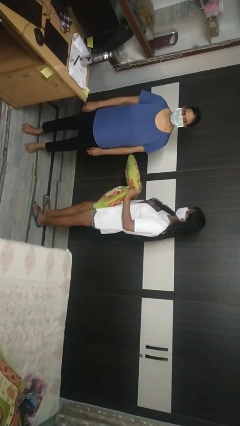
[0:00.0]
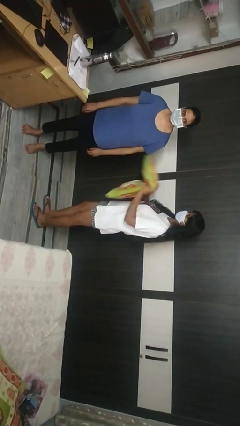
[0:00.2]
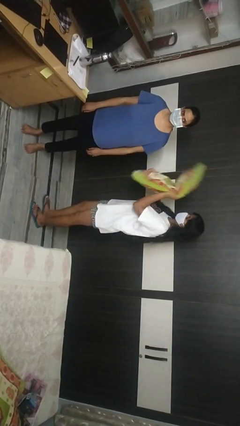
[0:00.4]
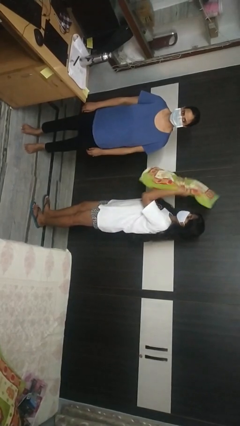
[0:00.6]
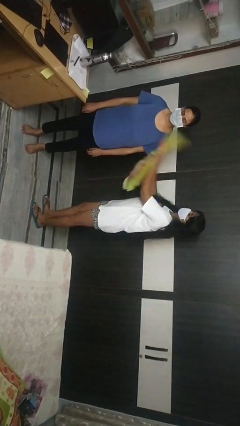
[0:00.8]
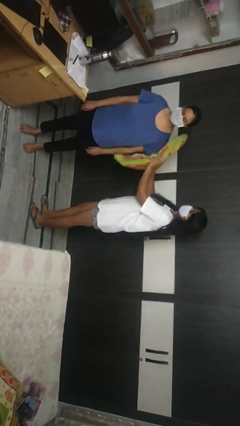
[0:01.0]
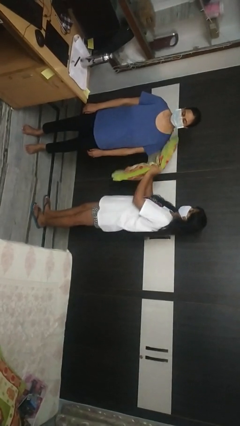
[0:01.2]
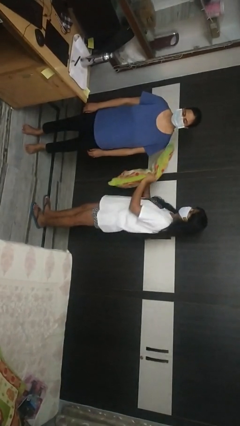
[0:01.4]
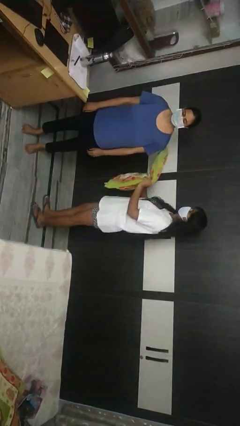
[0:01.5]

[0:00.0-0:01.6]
person hits person with pillow

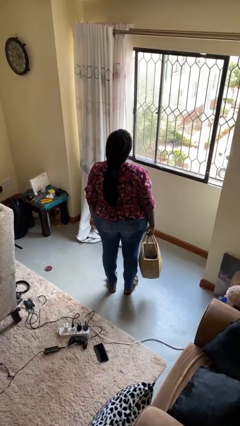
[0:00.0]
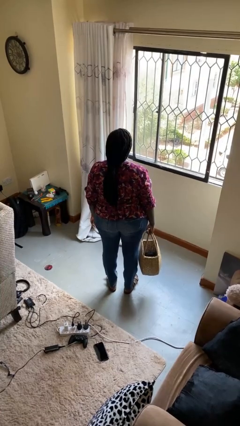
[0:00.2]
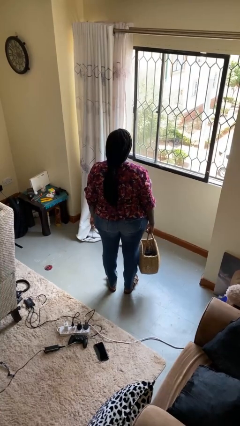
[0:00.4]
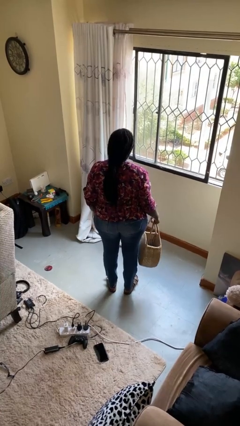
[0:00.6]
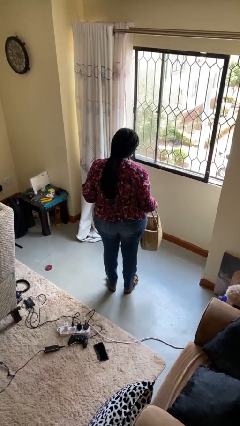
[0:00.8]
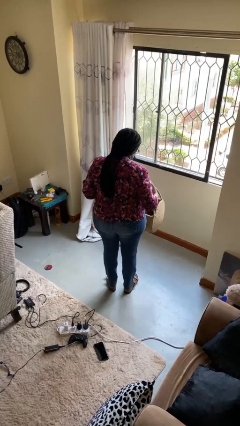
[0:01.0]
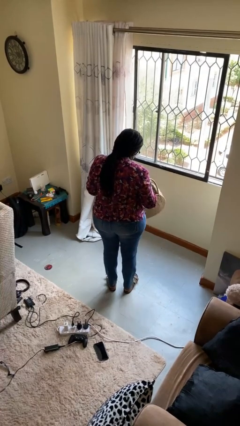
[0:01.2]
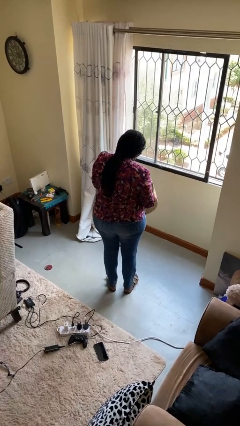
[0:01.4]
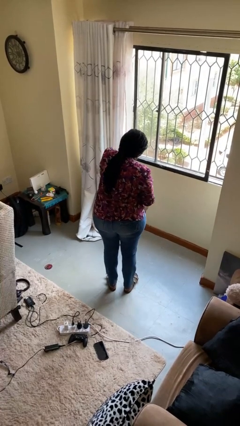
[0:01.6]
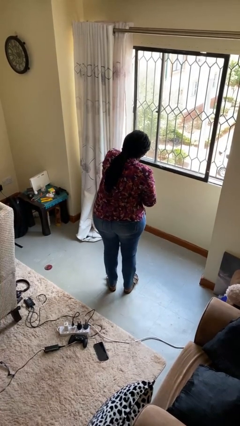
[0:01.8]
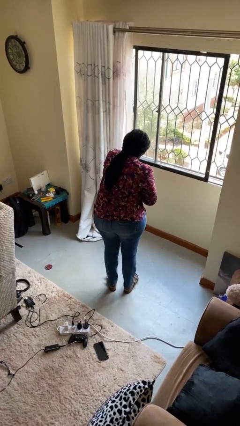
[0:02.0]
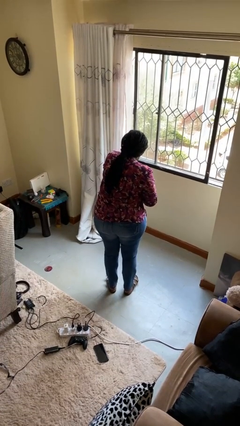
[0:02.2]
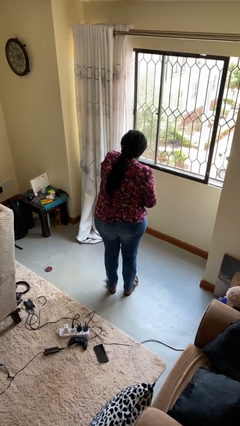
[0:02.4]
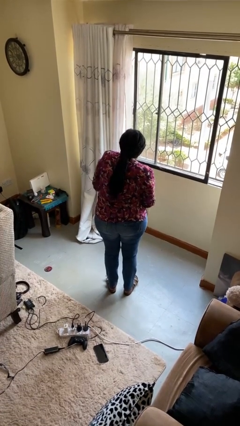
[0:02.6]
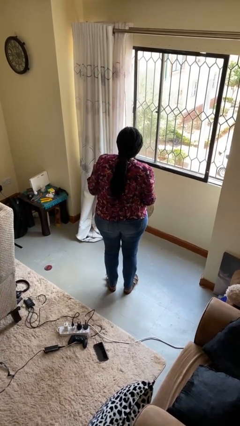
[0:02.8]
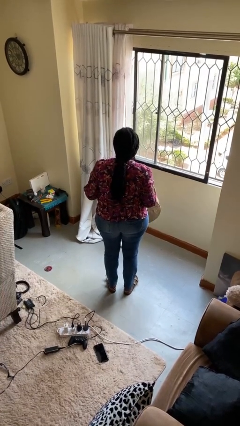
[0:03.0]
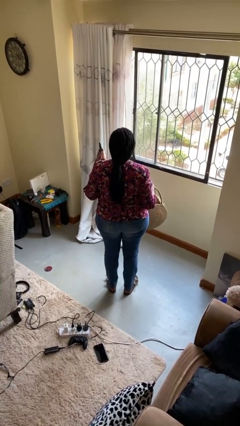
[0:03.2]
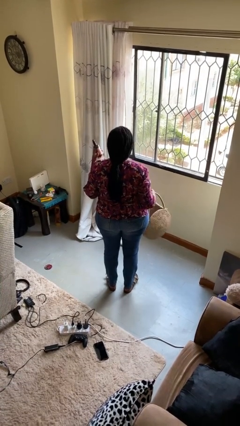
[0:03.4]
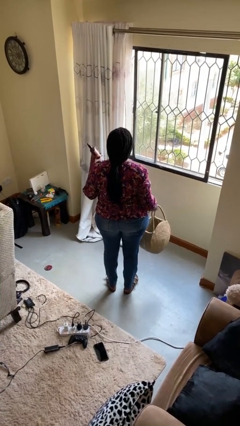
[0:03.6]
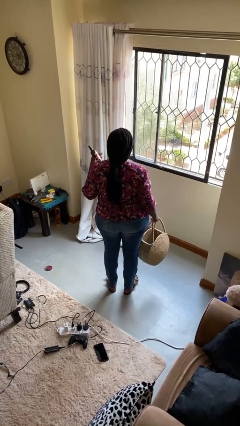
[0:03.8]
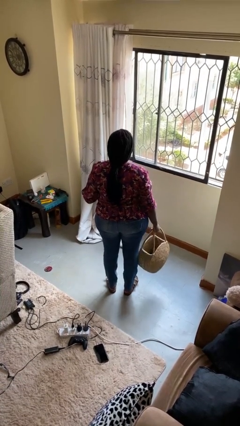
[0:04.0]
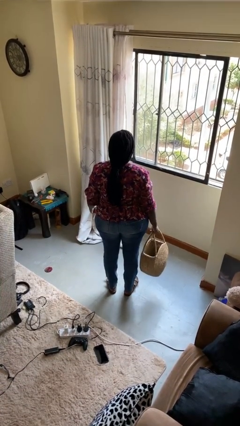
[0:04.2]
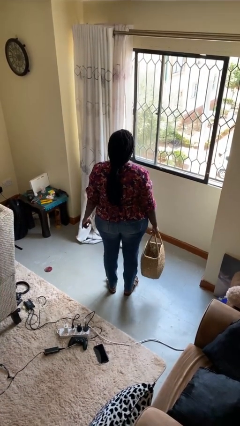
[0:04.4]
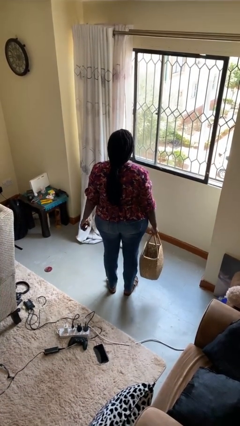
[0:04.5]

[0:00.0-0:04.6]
person takes object from basket

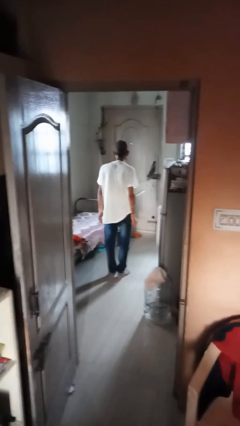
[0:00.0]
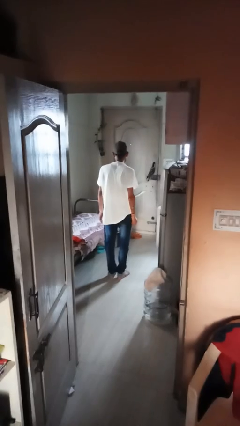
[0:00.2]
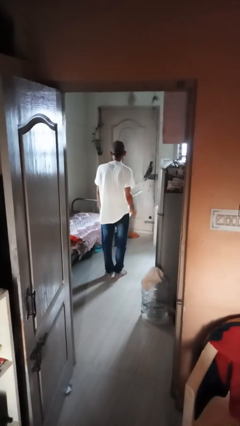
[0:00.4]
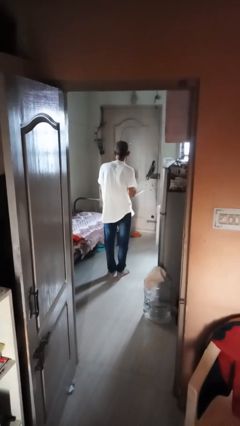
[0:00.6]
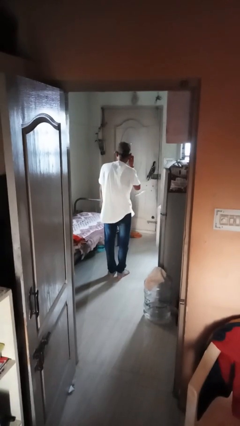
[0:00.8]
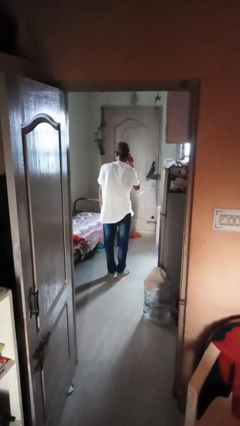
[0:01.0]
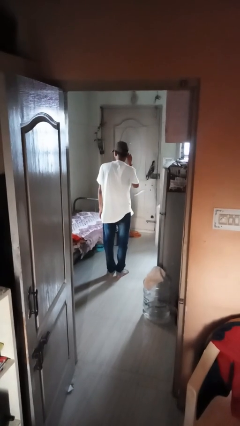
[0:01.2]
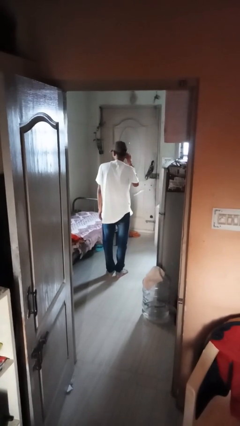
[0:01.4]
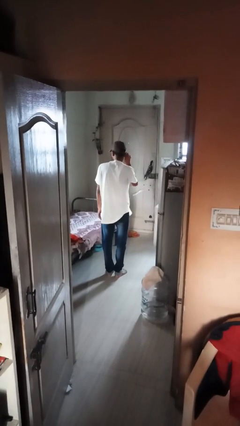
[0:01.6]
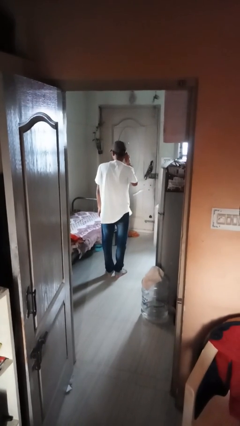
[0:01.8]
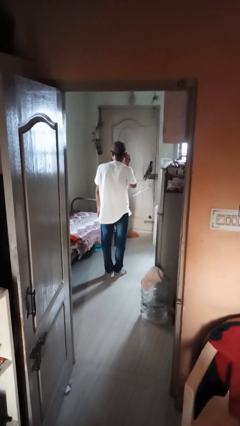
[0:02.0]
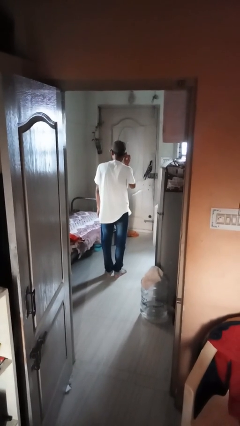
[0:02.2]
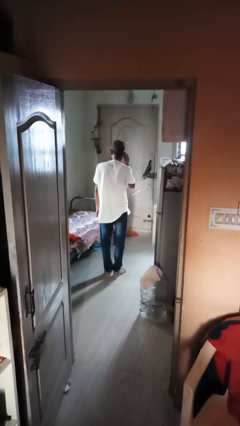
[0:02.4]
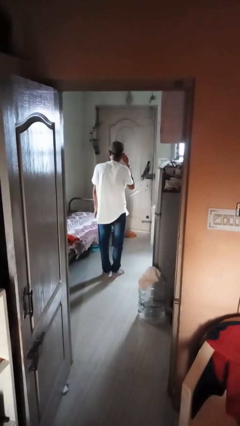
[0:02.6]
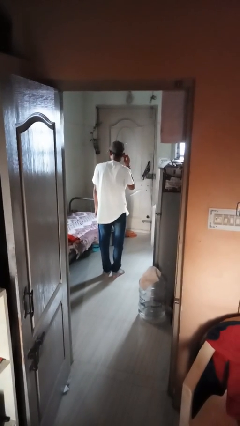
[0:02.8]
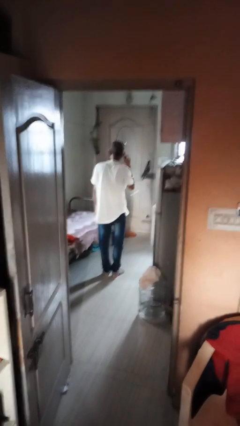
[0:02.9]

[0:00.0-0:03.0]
person touches earlobe

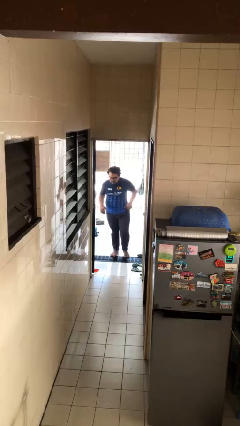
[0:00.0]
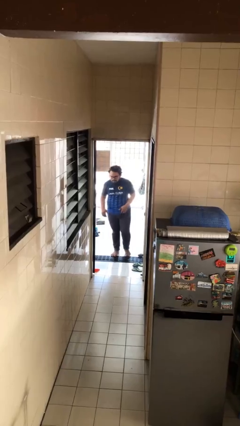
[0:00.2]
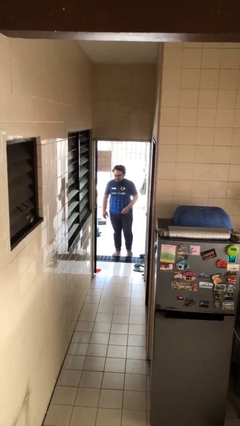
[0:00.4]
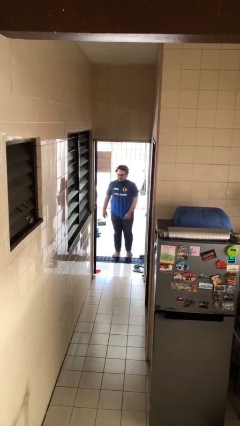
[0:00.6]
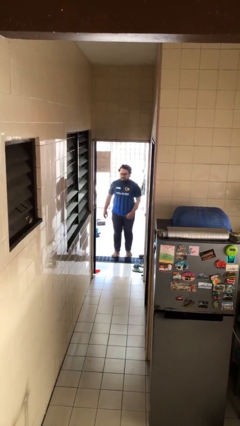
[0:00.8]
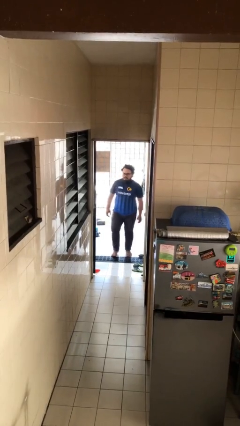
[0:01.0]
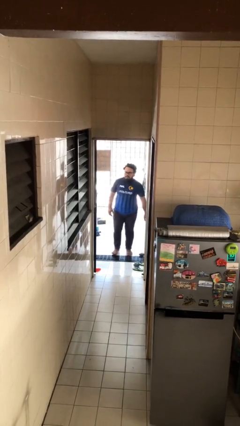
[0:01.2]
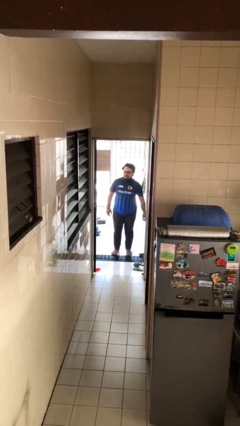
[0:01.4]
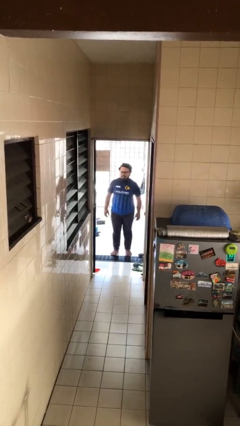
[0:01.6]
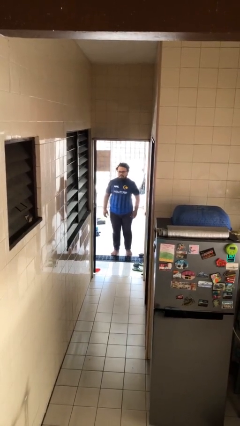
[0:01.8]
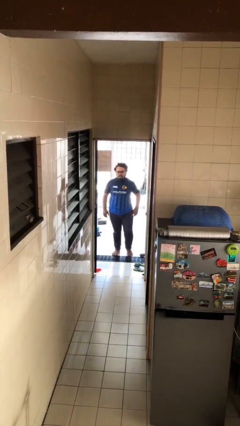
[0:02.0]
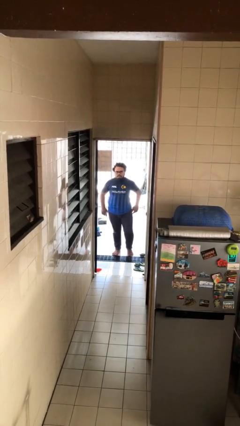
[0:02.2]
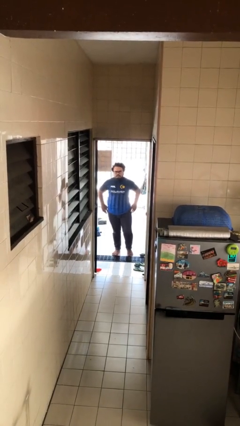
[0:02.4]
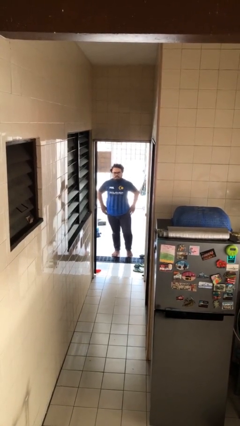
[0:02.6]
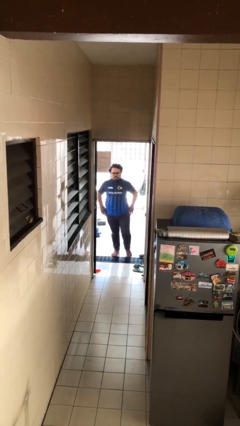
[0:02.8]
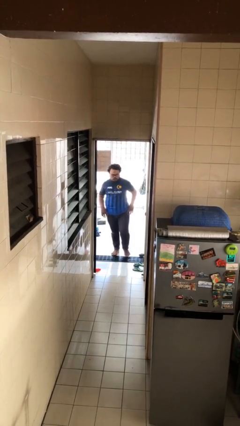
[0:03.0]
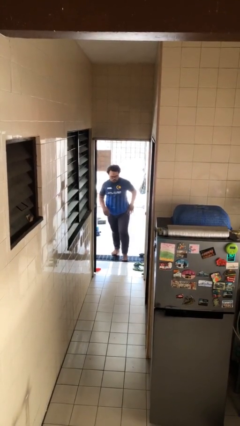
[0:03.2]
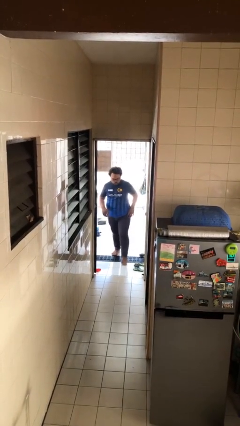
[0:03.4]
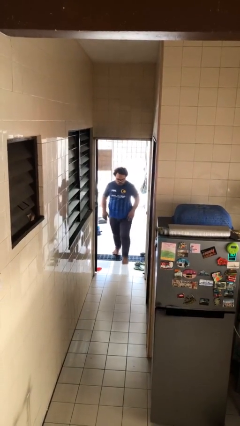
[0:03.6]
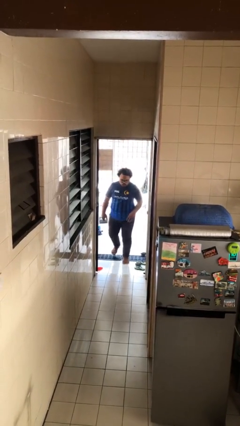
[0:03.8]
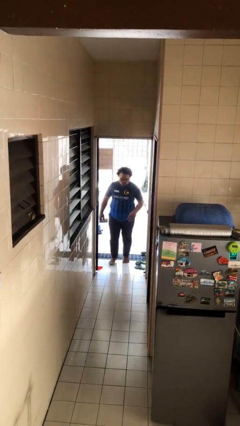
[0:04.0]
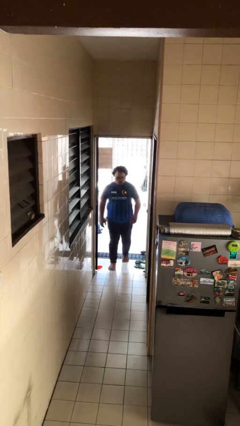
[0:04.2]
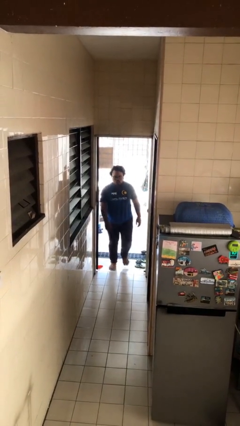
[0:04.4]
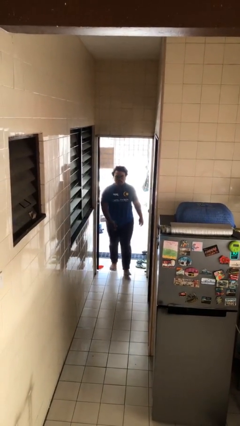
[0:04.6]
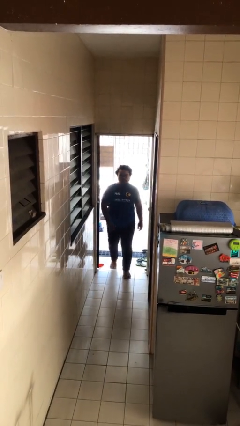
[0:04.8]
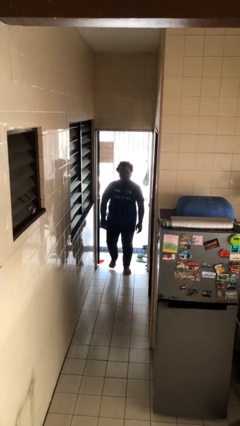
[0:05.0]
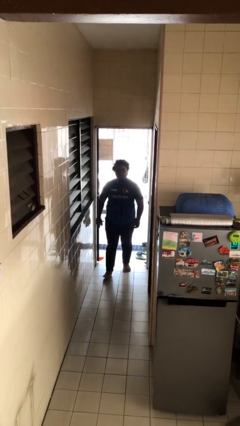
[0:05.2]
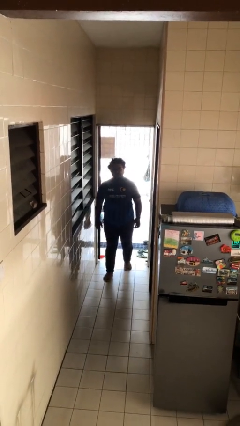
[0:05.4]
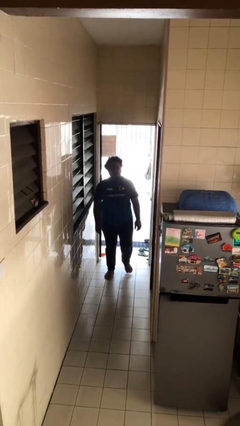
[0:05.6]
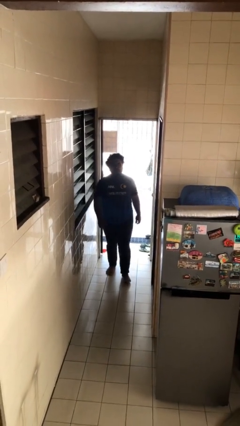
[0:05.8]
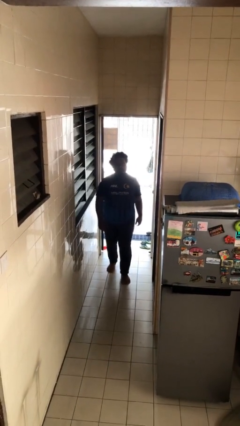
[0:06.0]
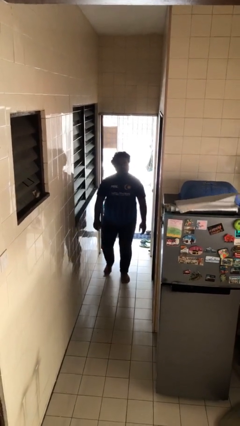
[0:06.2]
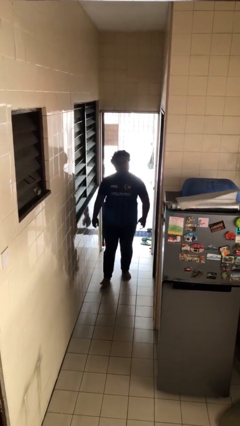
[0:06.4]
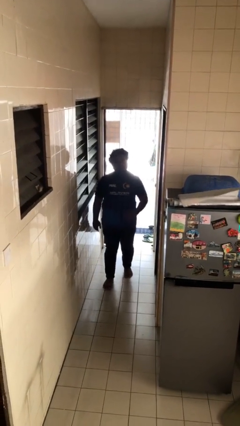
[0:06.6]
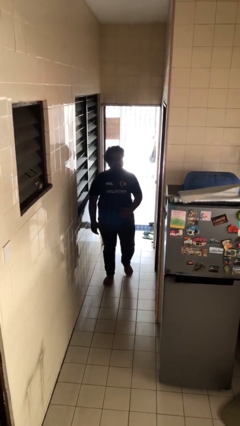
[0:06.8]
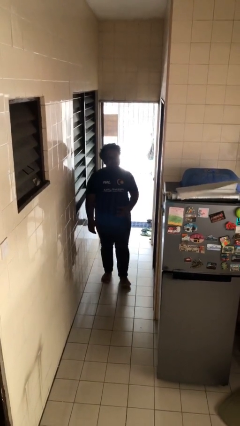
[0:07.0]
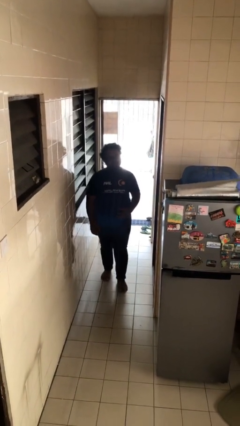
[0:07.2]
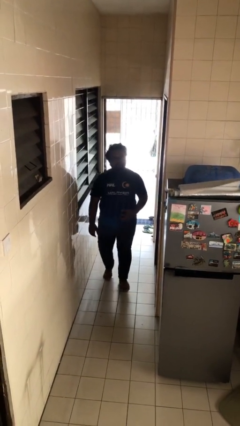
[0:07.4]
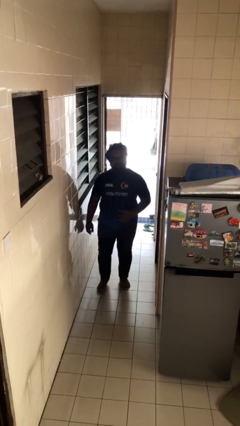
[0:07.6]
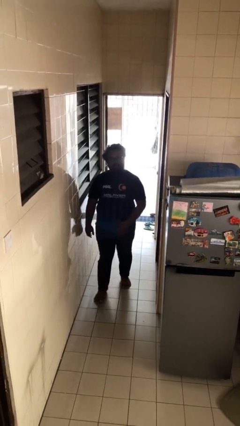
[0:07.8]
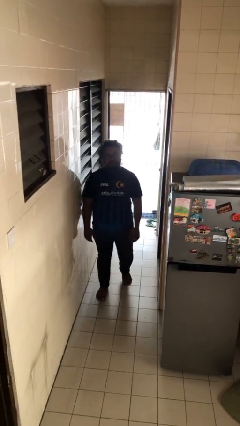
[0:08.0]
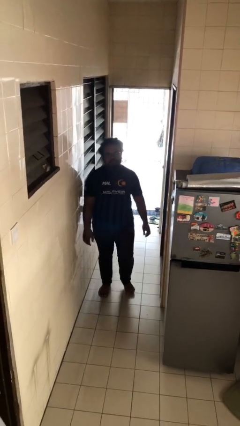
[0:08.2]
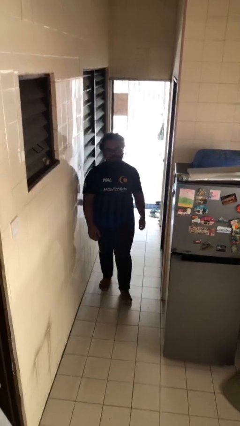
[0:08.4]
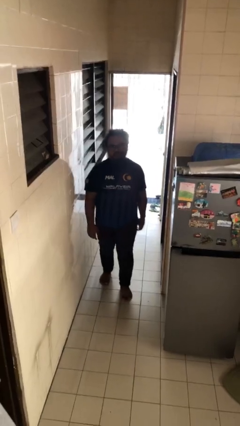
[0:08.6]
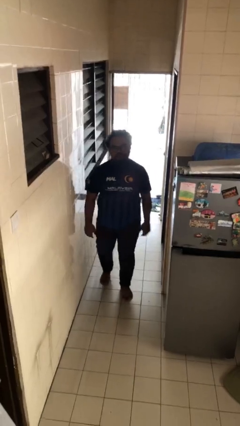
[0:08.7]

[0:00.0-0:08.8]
person enters scene through structure
